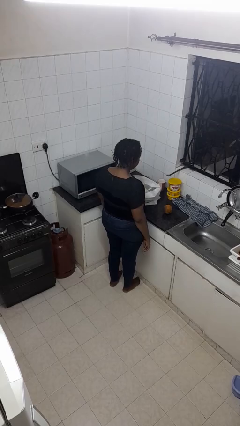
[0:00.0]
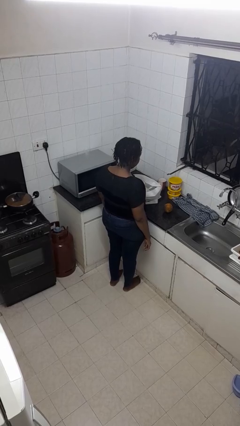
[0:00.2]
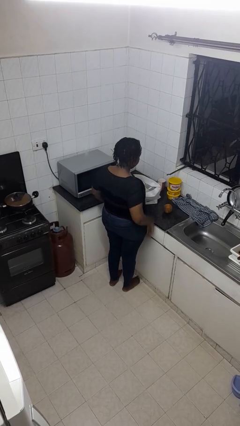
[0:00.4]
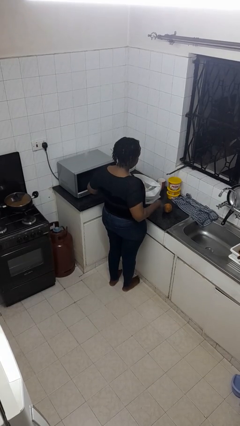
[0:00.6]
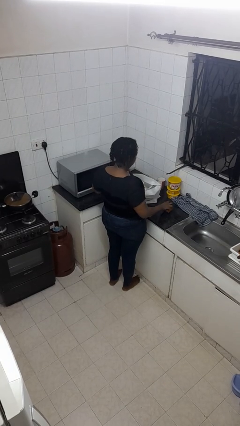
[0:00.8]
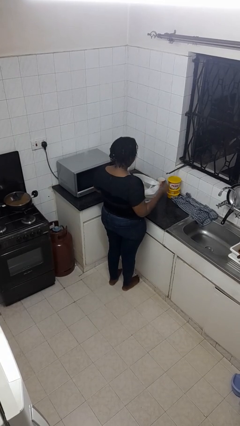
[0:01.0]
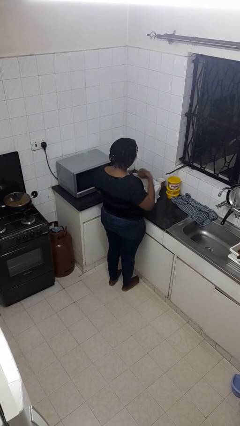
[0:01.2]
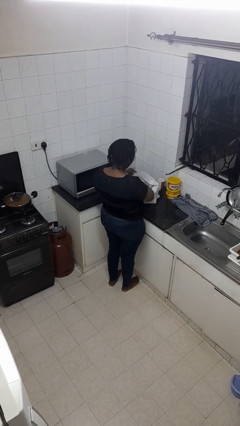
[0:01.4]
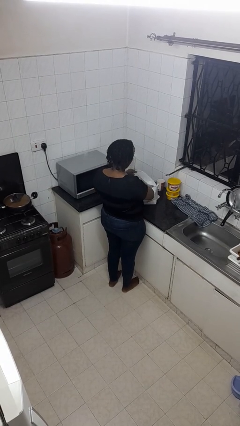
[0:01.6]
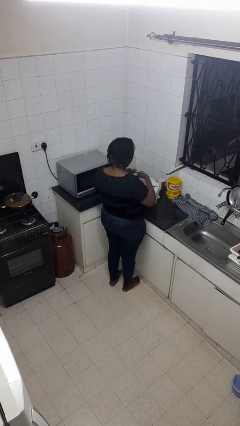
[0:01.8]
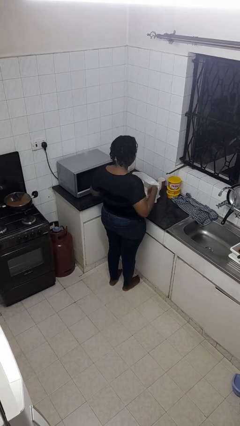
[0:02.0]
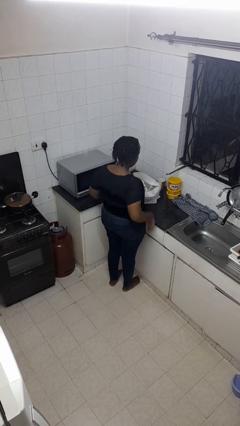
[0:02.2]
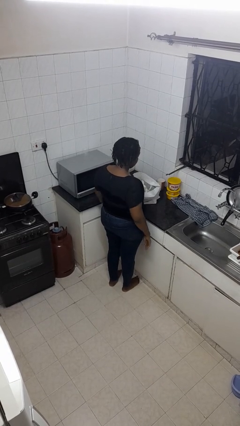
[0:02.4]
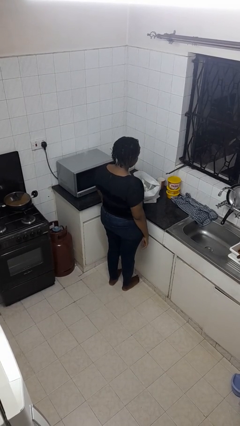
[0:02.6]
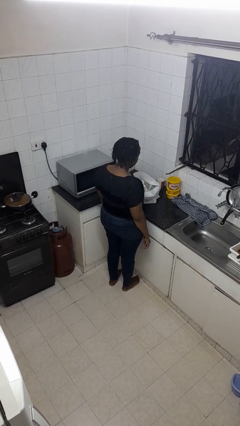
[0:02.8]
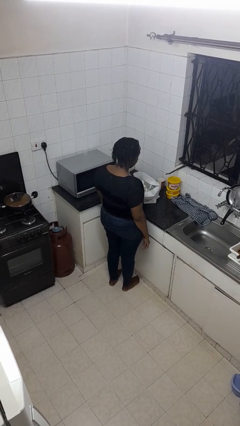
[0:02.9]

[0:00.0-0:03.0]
person puts object into bag

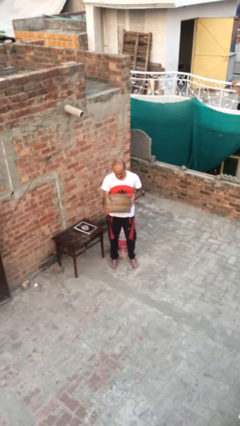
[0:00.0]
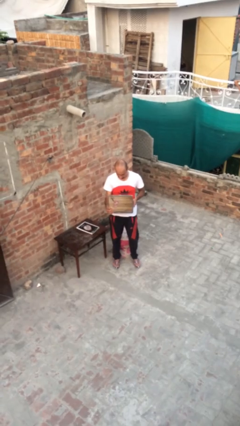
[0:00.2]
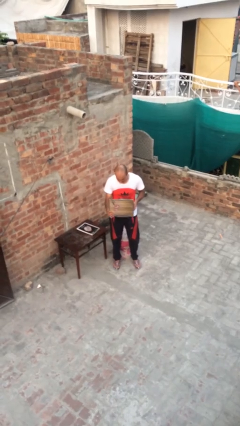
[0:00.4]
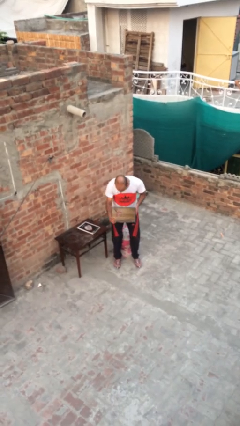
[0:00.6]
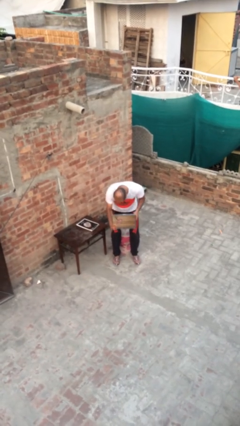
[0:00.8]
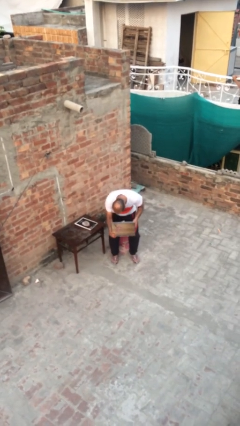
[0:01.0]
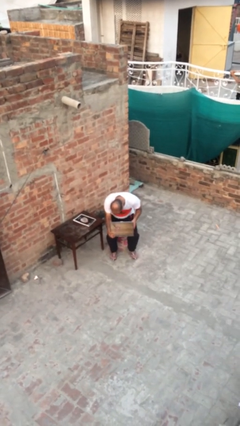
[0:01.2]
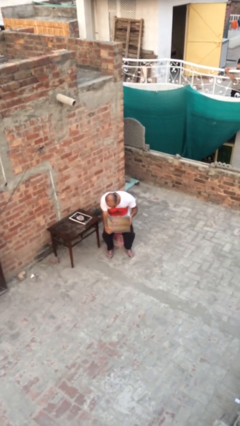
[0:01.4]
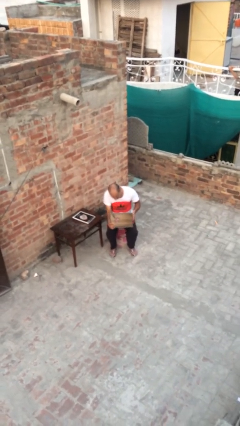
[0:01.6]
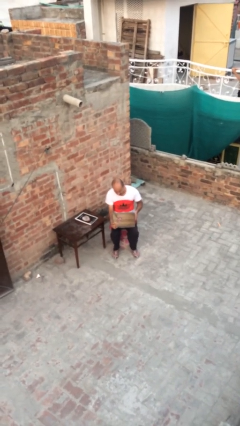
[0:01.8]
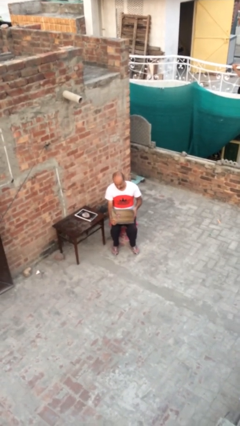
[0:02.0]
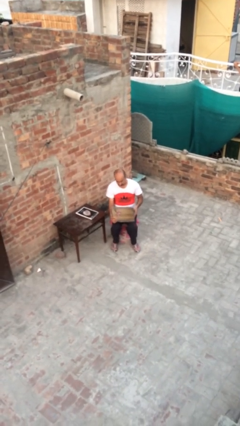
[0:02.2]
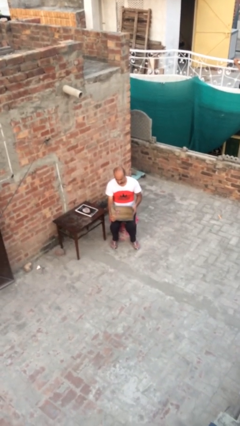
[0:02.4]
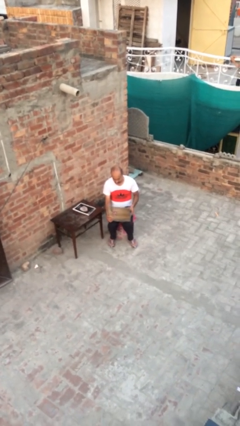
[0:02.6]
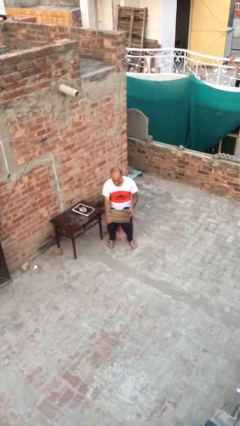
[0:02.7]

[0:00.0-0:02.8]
person sits down

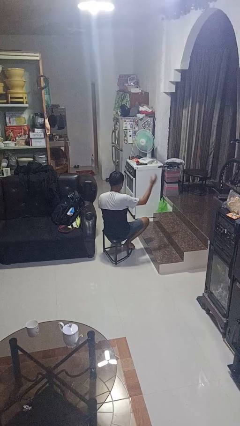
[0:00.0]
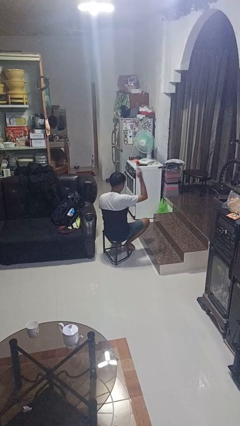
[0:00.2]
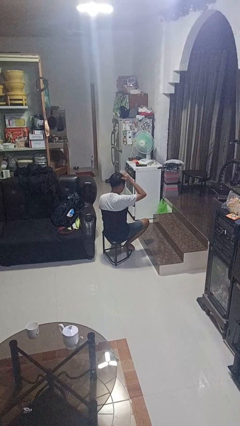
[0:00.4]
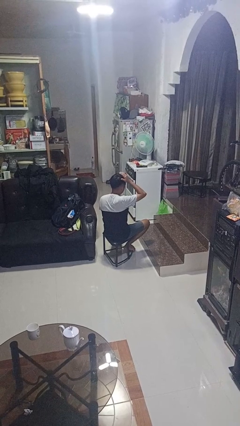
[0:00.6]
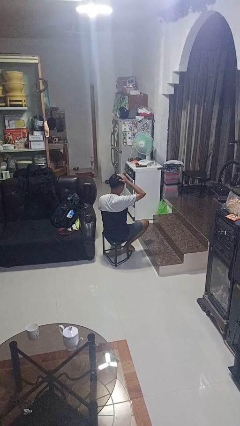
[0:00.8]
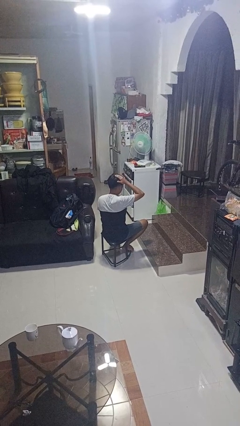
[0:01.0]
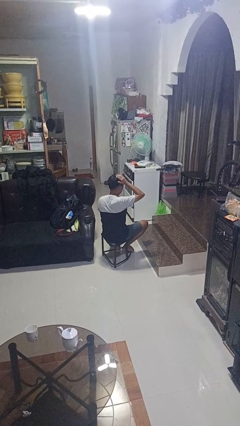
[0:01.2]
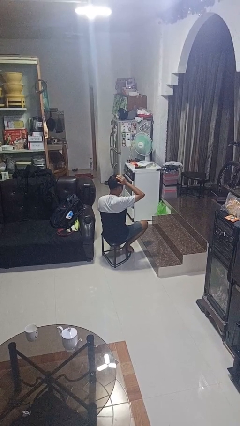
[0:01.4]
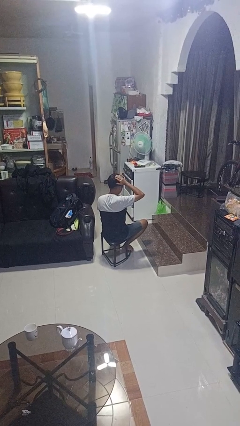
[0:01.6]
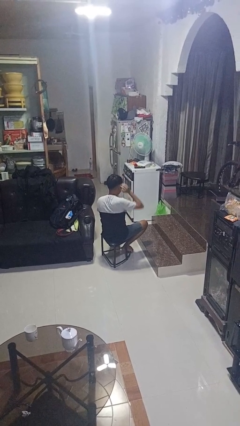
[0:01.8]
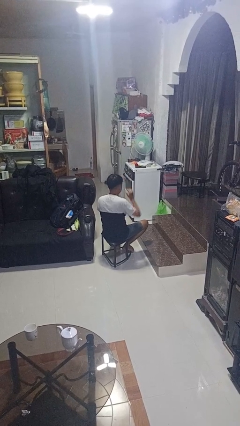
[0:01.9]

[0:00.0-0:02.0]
person pats head

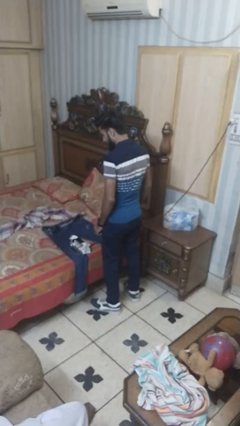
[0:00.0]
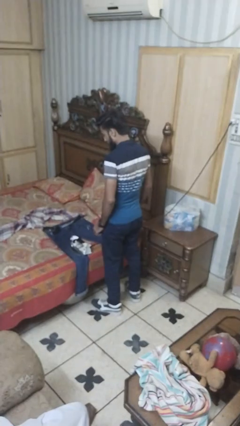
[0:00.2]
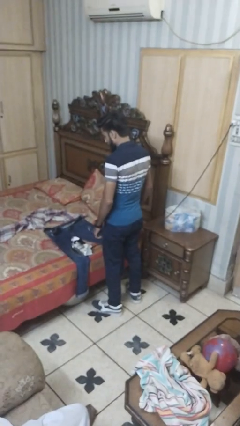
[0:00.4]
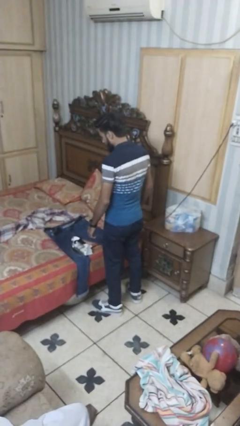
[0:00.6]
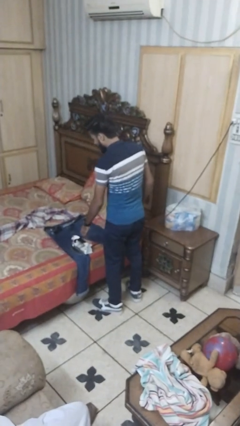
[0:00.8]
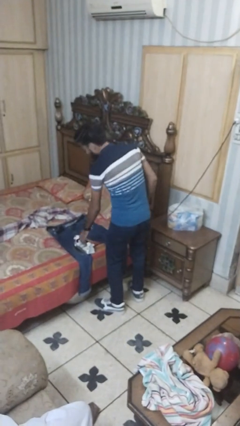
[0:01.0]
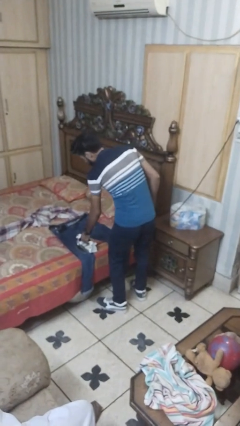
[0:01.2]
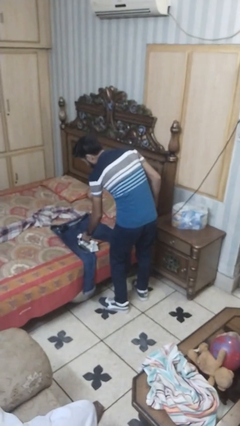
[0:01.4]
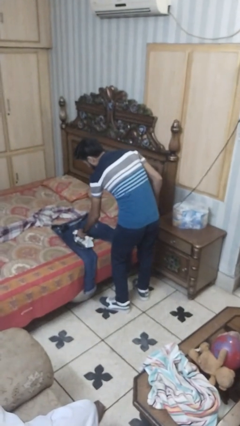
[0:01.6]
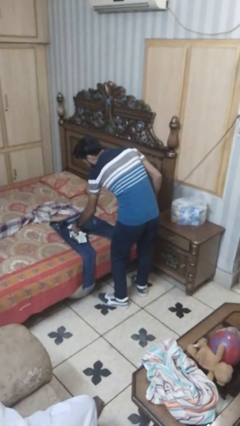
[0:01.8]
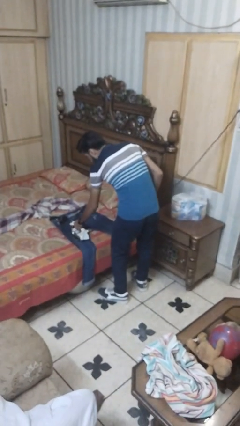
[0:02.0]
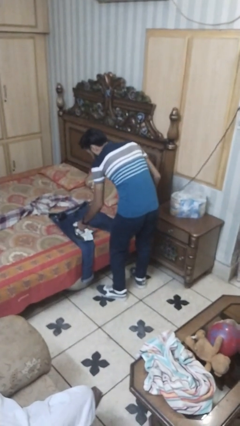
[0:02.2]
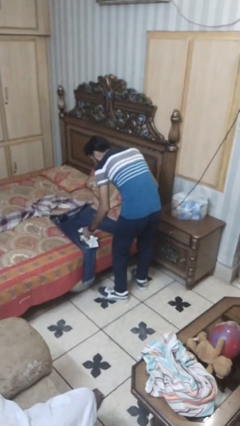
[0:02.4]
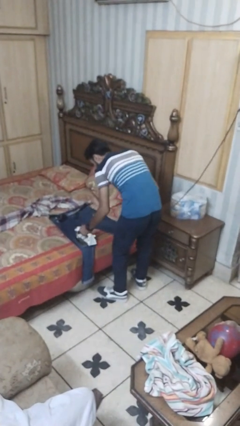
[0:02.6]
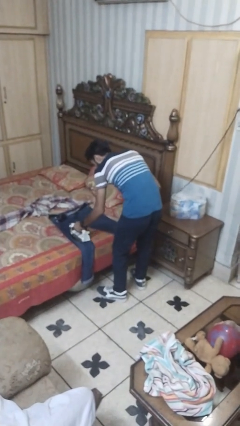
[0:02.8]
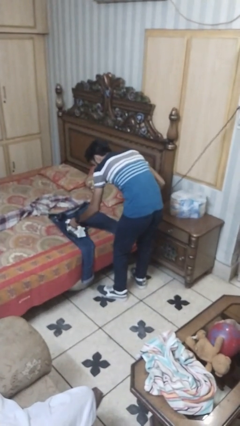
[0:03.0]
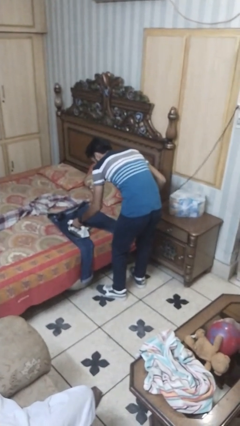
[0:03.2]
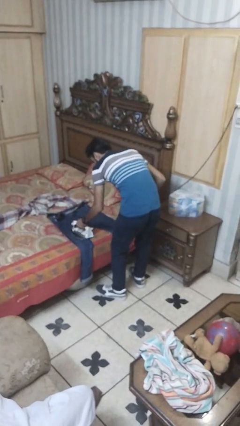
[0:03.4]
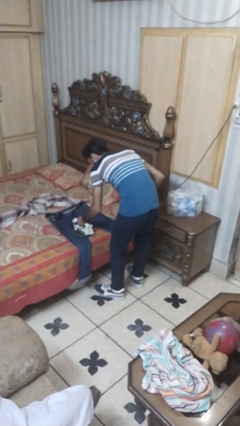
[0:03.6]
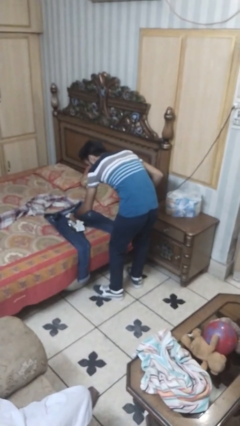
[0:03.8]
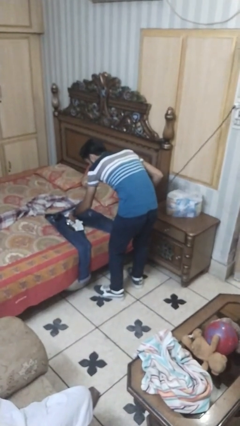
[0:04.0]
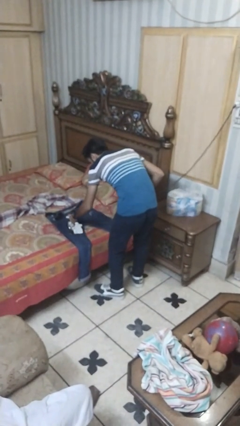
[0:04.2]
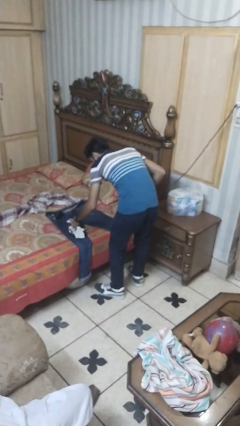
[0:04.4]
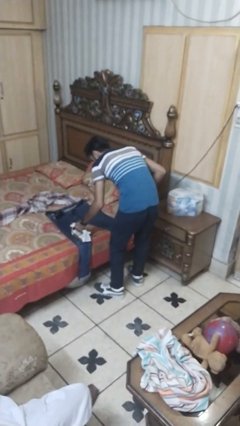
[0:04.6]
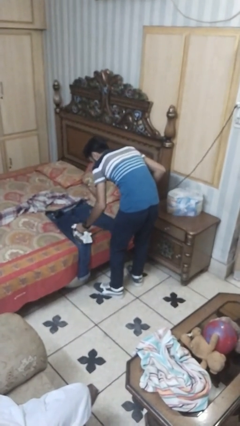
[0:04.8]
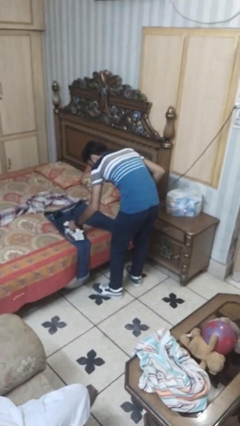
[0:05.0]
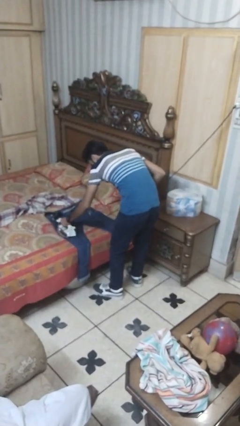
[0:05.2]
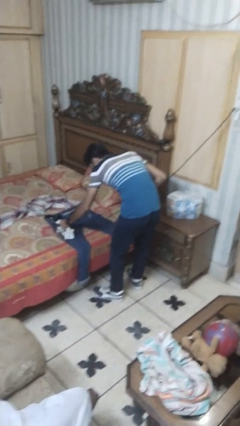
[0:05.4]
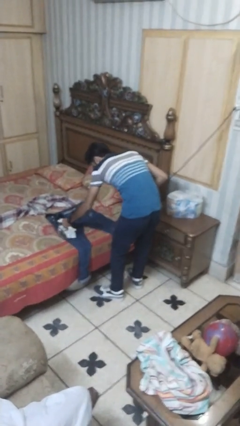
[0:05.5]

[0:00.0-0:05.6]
person irons clothes

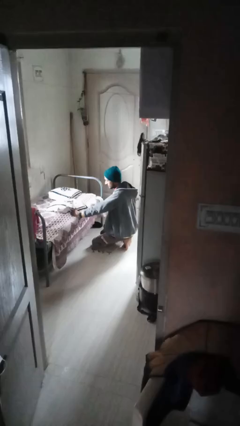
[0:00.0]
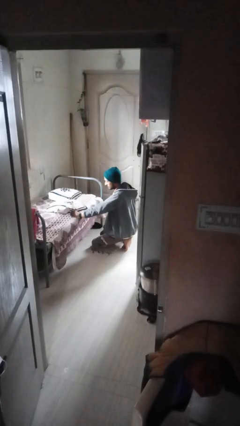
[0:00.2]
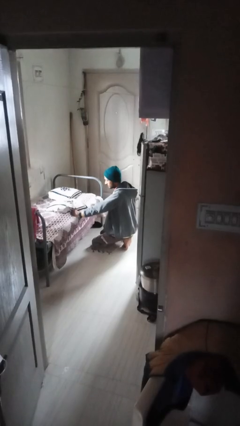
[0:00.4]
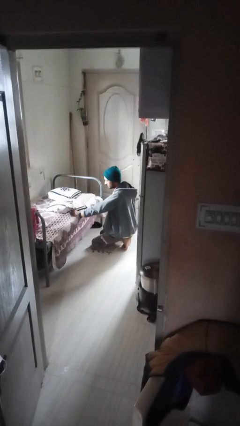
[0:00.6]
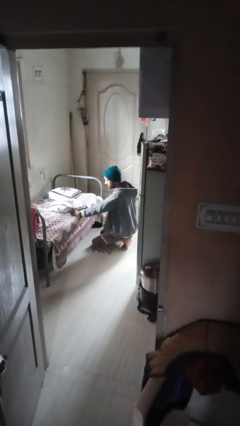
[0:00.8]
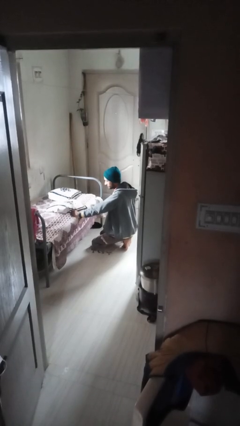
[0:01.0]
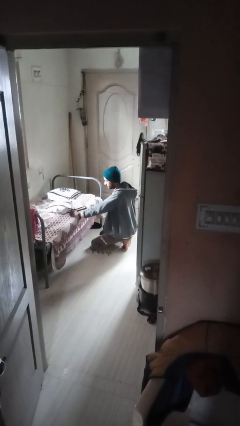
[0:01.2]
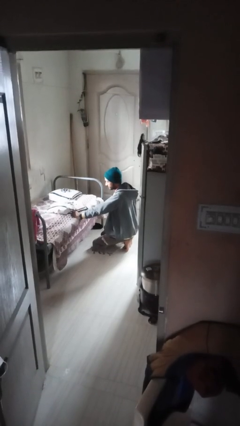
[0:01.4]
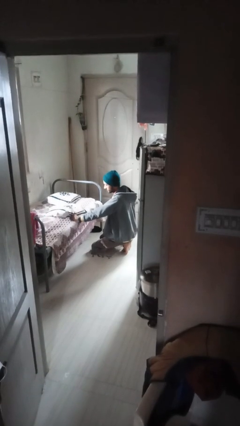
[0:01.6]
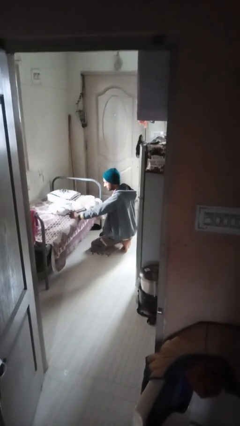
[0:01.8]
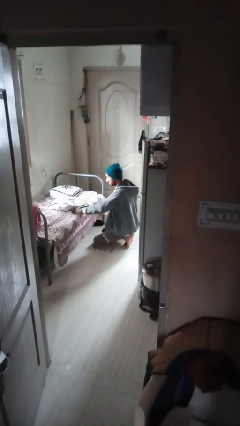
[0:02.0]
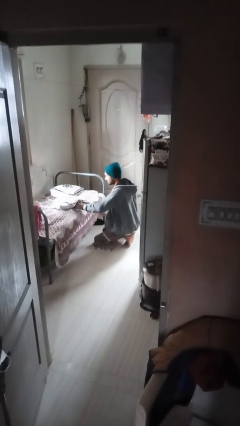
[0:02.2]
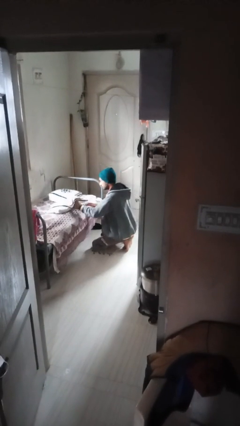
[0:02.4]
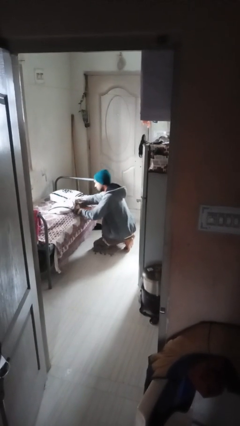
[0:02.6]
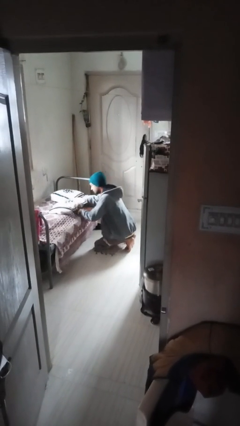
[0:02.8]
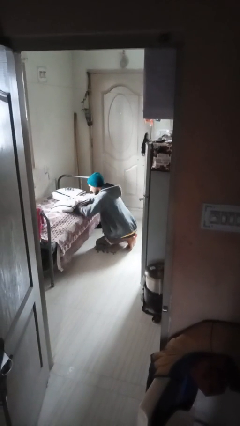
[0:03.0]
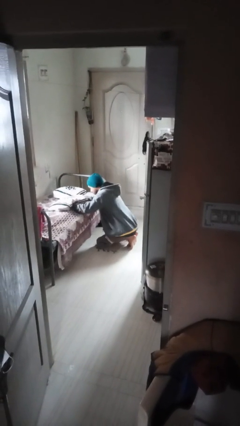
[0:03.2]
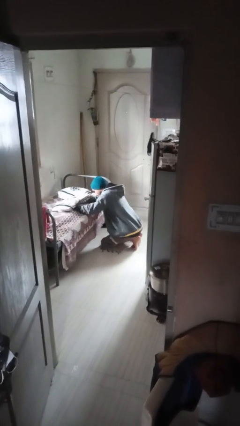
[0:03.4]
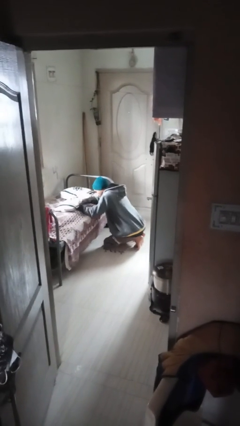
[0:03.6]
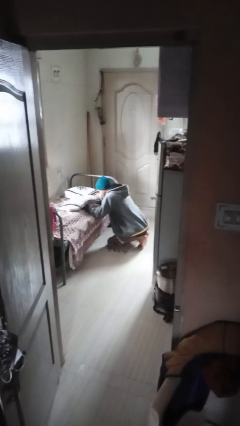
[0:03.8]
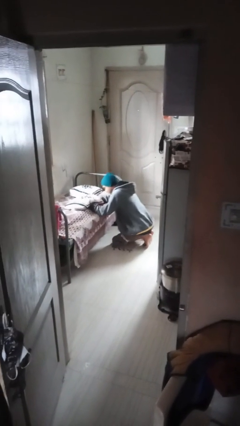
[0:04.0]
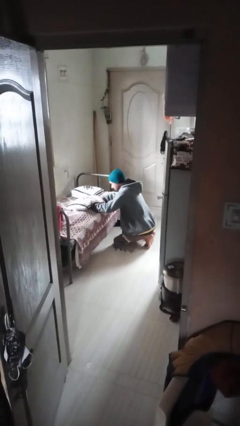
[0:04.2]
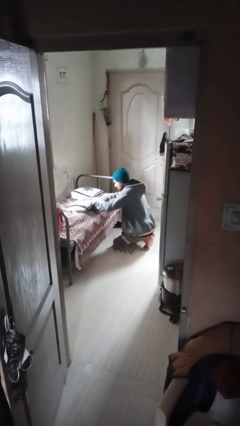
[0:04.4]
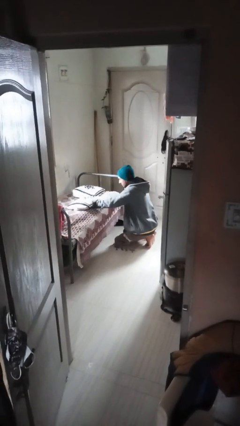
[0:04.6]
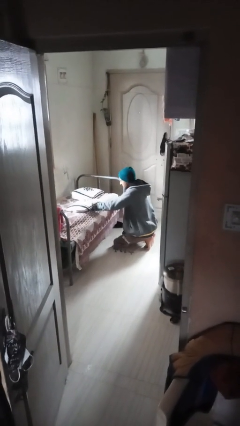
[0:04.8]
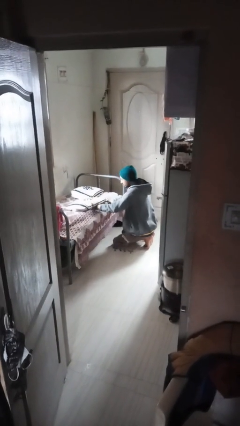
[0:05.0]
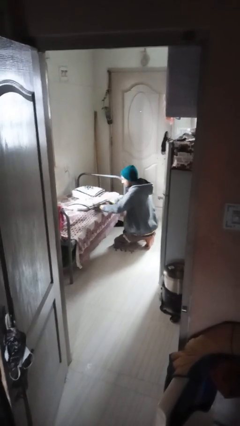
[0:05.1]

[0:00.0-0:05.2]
person searches in couch
